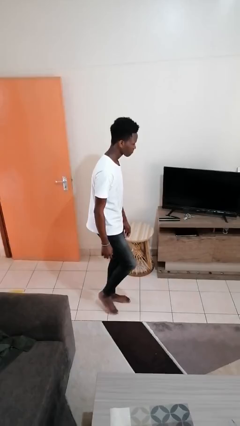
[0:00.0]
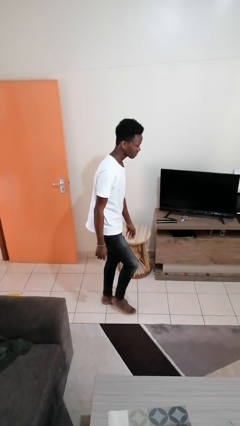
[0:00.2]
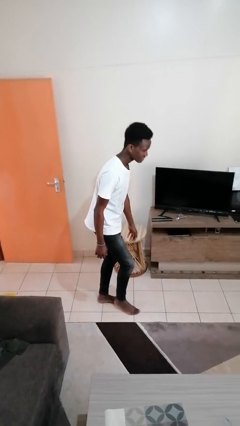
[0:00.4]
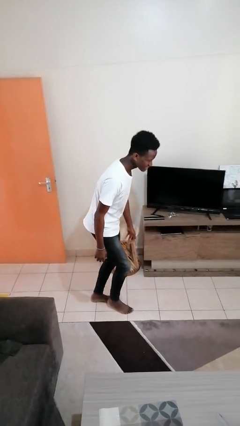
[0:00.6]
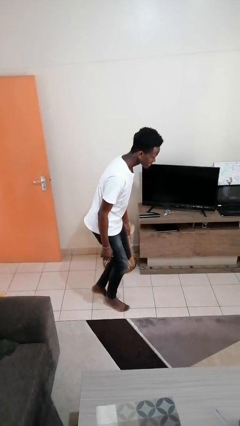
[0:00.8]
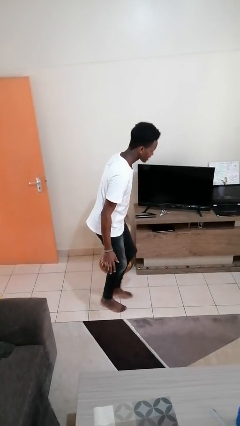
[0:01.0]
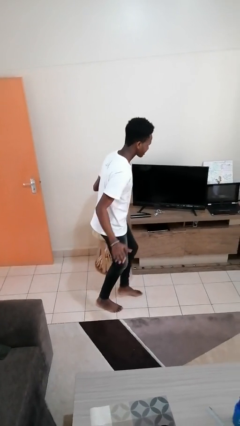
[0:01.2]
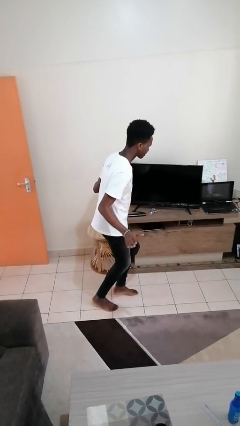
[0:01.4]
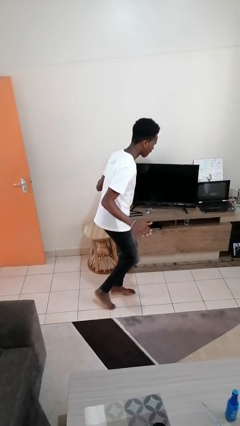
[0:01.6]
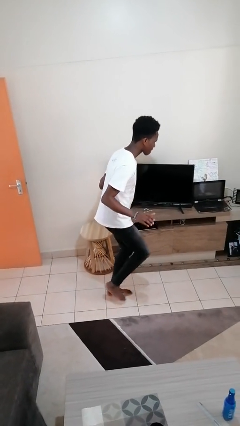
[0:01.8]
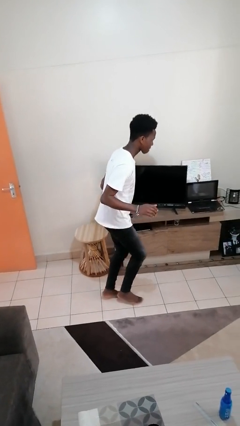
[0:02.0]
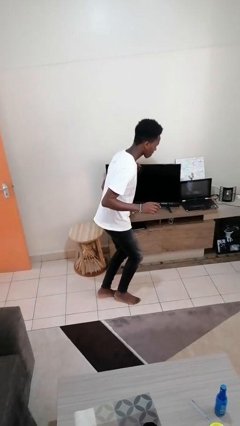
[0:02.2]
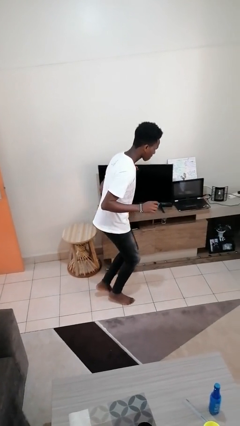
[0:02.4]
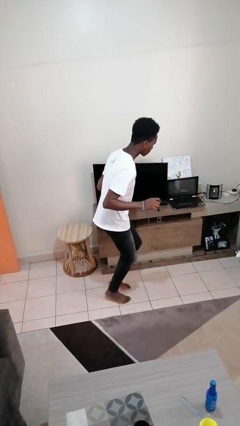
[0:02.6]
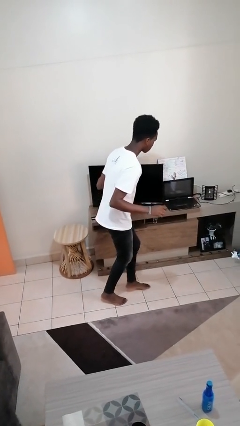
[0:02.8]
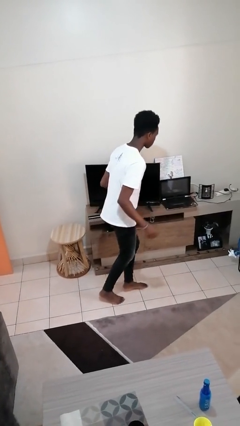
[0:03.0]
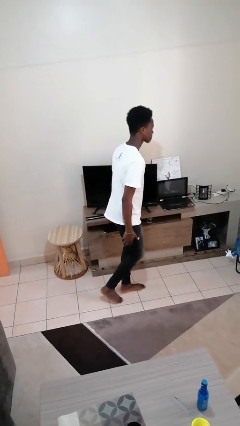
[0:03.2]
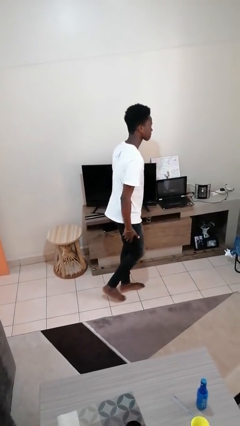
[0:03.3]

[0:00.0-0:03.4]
person walks tiptoe

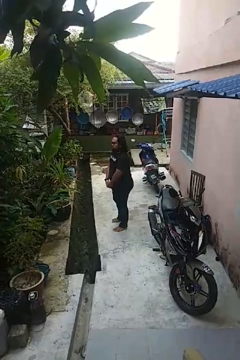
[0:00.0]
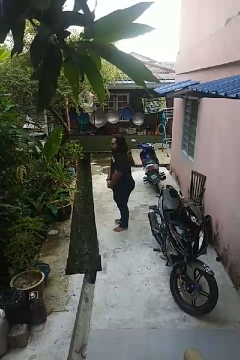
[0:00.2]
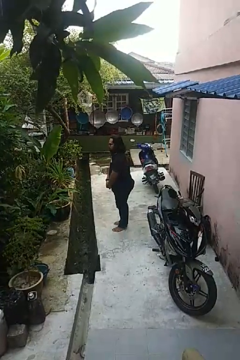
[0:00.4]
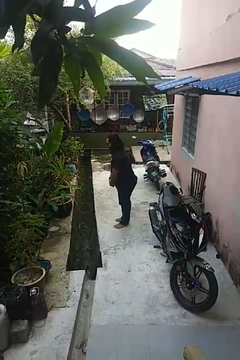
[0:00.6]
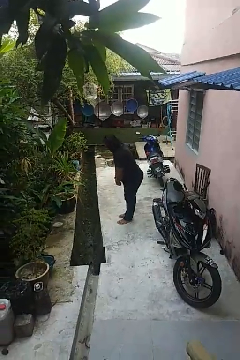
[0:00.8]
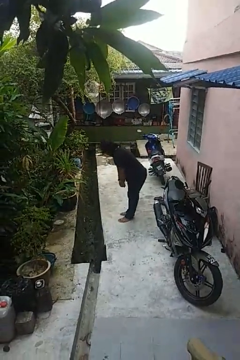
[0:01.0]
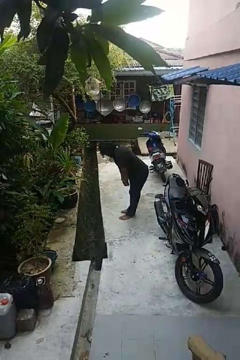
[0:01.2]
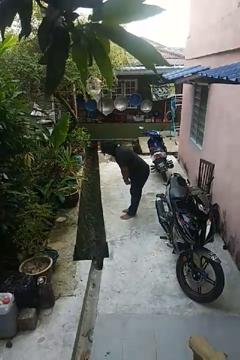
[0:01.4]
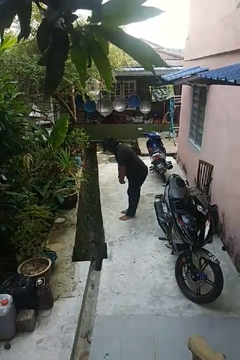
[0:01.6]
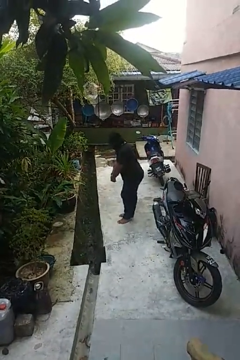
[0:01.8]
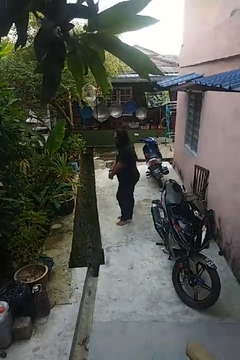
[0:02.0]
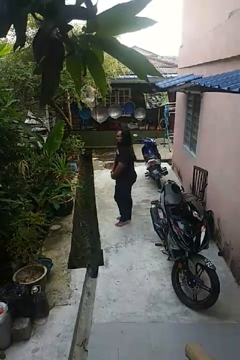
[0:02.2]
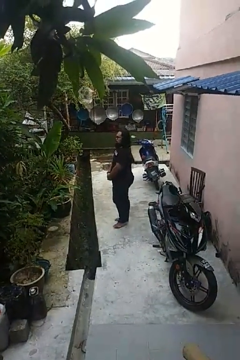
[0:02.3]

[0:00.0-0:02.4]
person bows

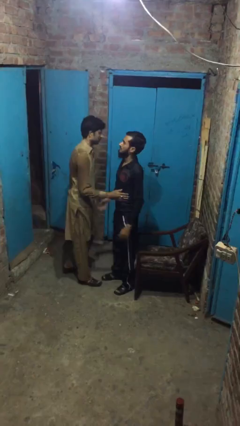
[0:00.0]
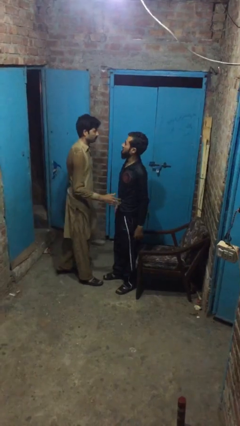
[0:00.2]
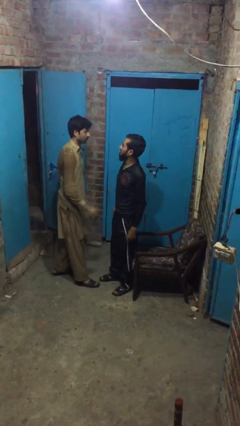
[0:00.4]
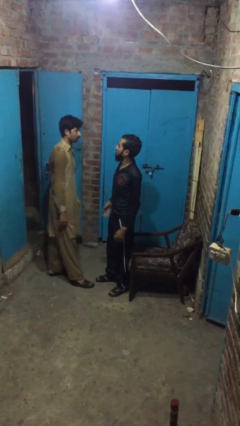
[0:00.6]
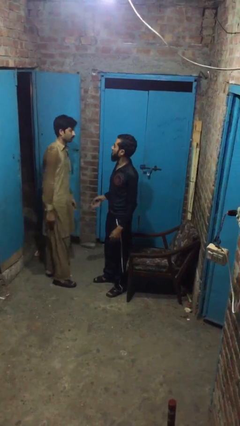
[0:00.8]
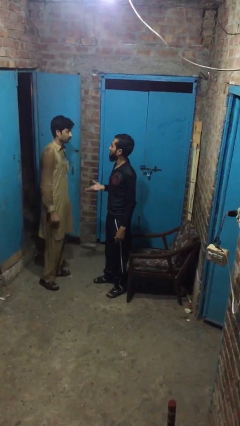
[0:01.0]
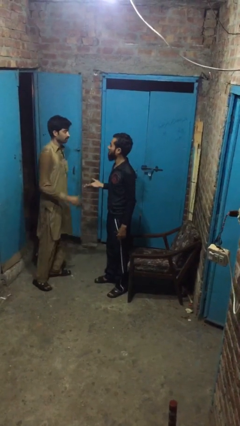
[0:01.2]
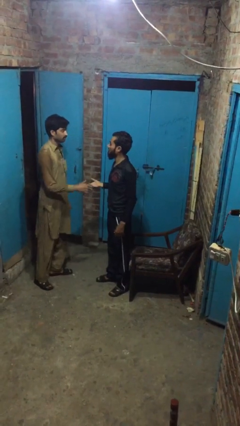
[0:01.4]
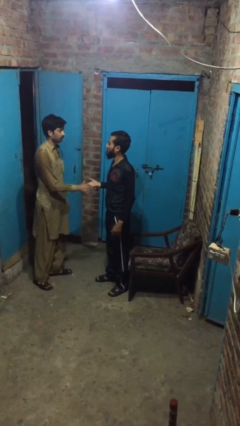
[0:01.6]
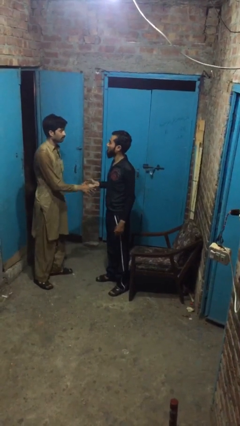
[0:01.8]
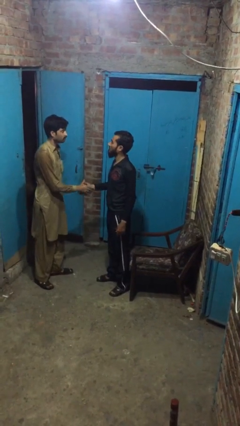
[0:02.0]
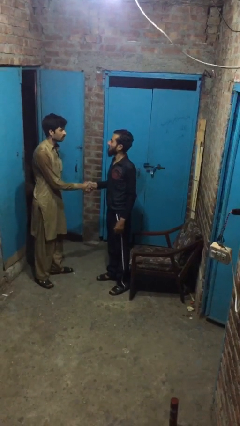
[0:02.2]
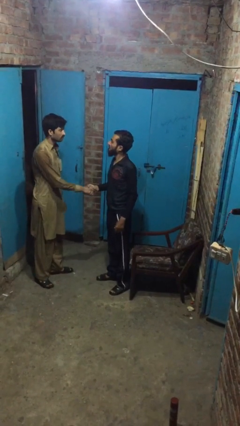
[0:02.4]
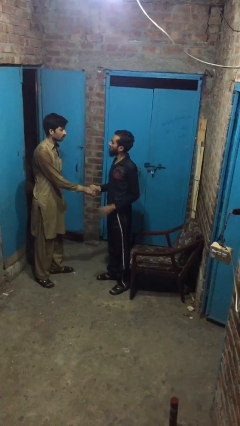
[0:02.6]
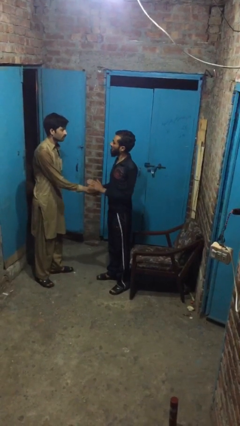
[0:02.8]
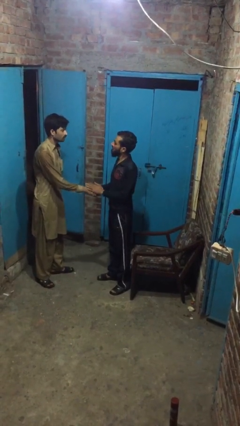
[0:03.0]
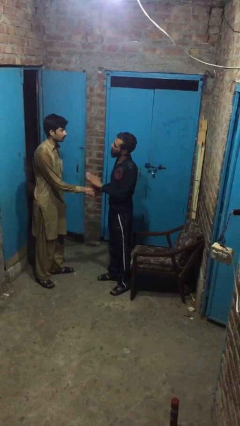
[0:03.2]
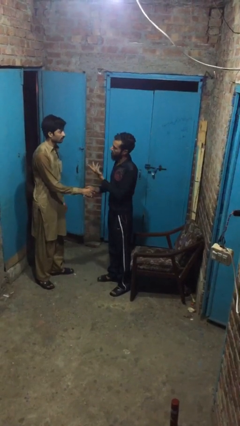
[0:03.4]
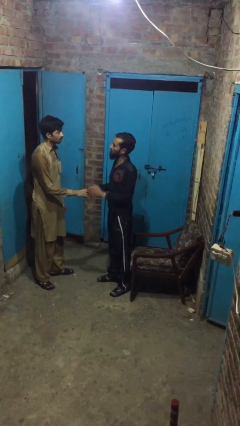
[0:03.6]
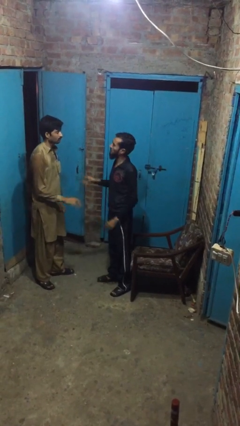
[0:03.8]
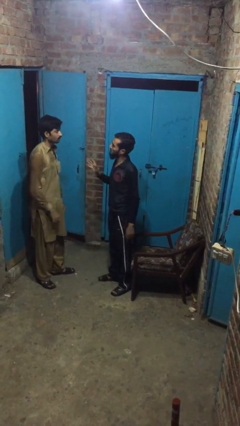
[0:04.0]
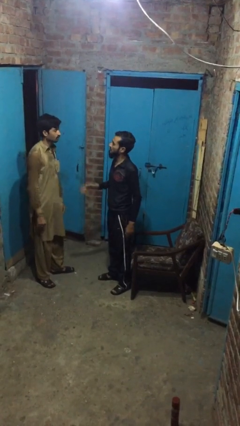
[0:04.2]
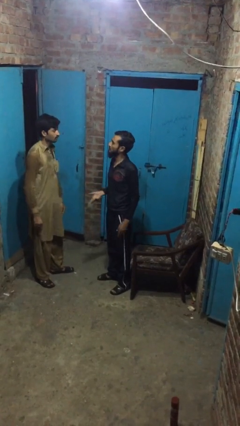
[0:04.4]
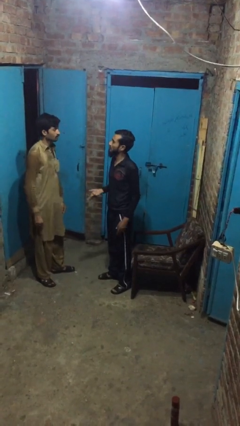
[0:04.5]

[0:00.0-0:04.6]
person talks to person

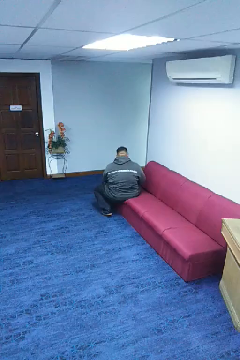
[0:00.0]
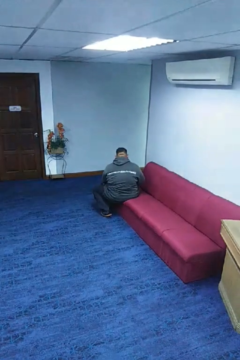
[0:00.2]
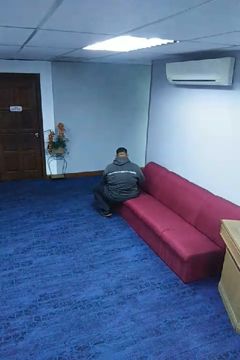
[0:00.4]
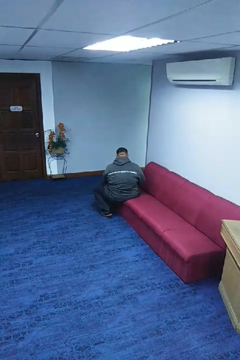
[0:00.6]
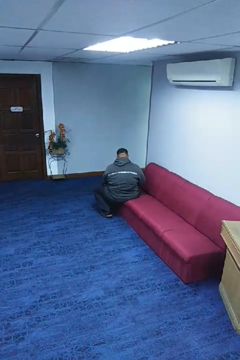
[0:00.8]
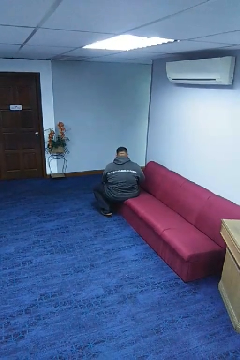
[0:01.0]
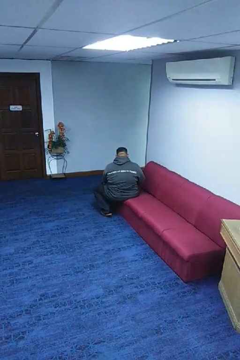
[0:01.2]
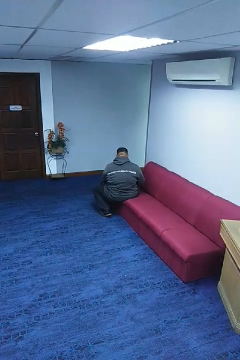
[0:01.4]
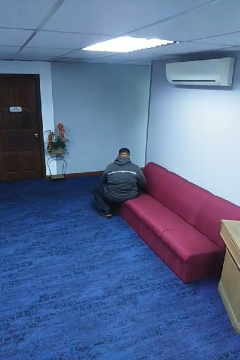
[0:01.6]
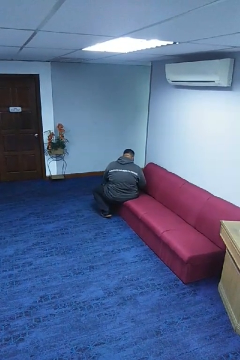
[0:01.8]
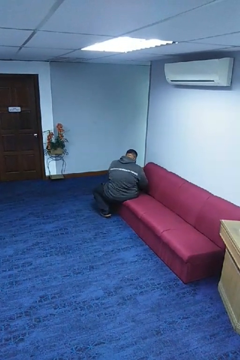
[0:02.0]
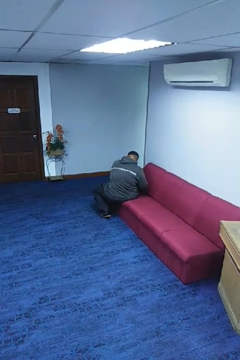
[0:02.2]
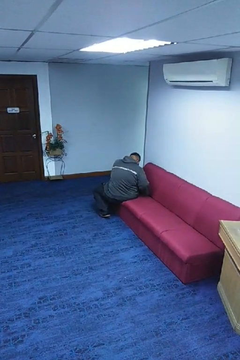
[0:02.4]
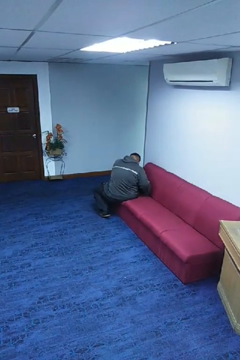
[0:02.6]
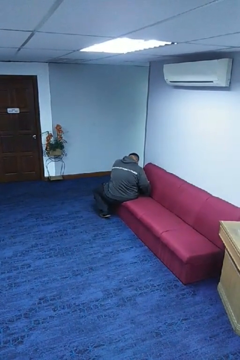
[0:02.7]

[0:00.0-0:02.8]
person searches in couch

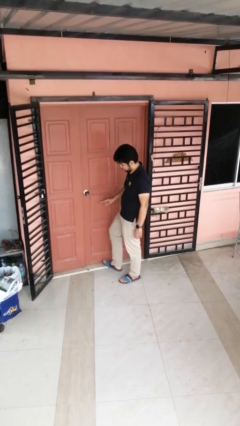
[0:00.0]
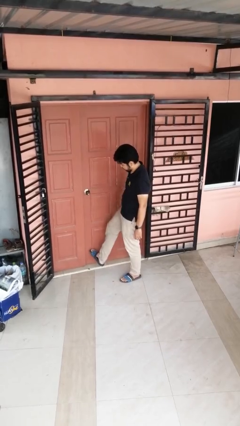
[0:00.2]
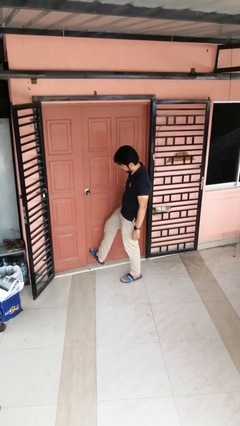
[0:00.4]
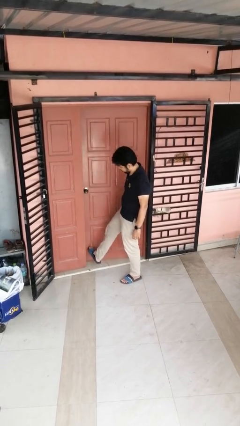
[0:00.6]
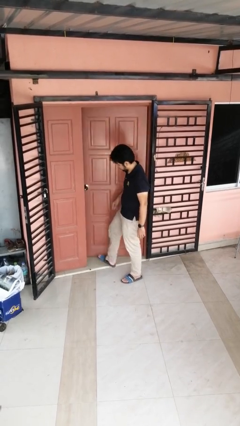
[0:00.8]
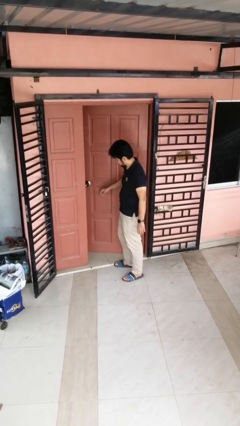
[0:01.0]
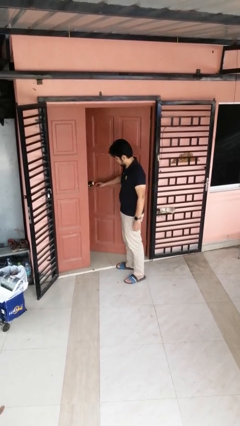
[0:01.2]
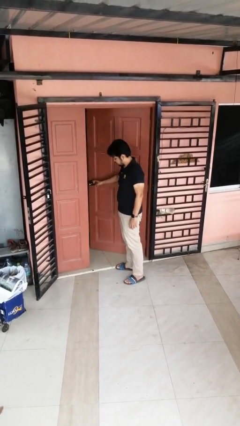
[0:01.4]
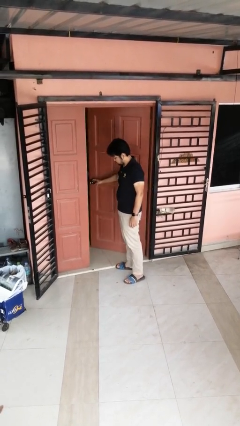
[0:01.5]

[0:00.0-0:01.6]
person opens facility door

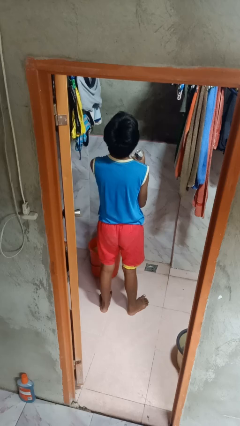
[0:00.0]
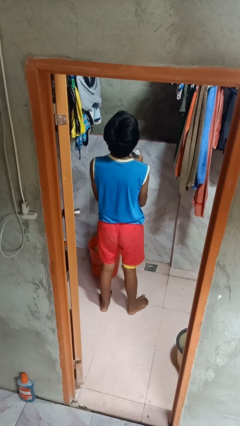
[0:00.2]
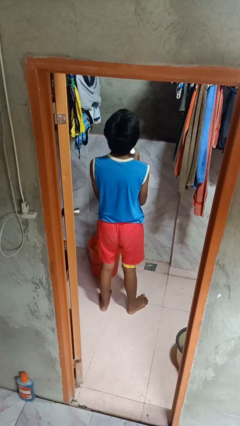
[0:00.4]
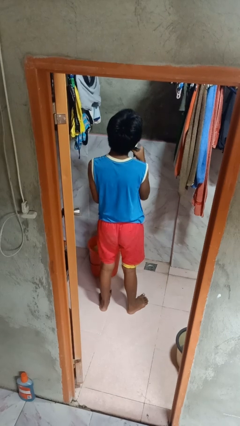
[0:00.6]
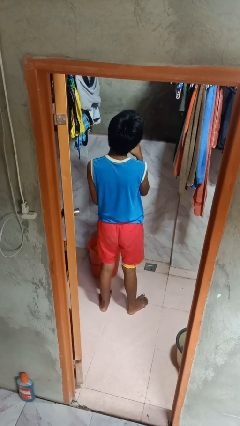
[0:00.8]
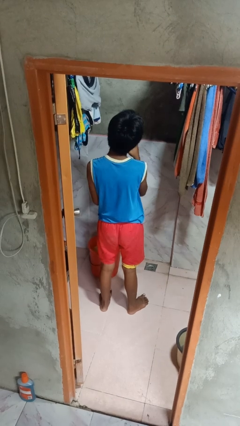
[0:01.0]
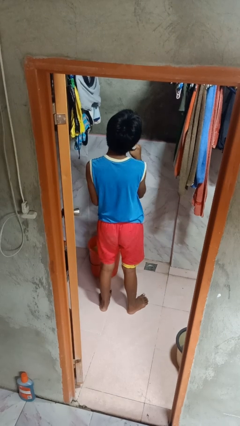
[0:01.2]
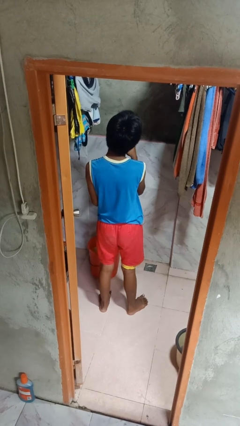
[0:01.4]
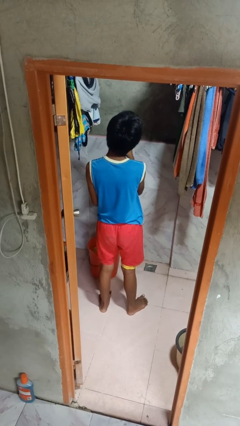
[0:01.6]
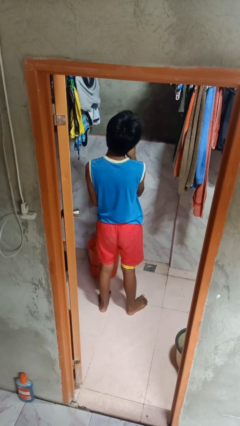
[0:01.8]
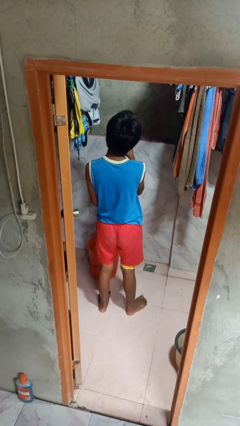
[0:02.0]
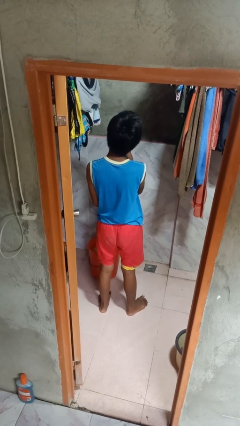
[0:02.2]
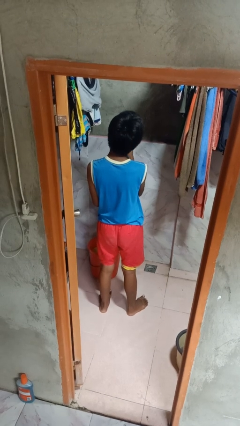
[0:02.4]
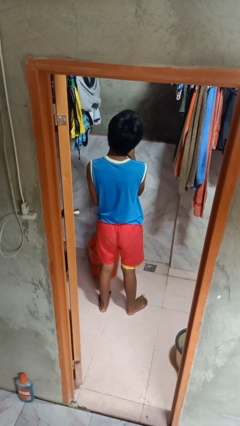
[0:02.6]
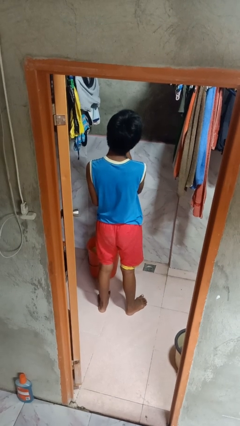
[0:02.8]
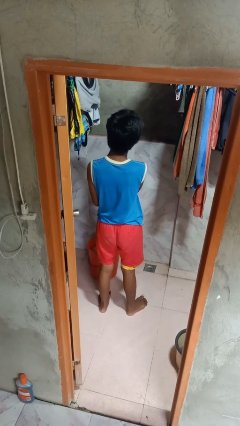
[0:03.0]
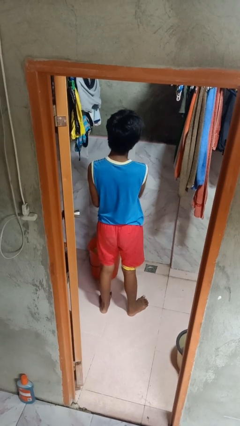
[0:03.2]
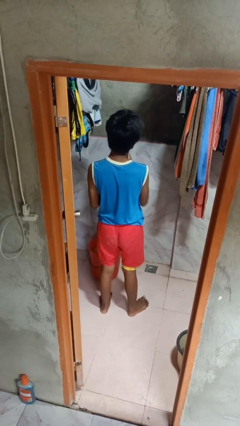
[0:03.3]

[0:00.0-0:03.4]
person shaves face

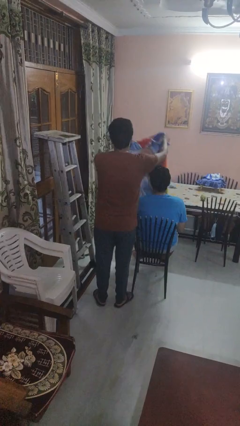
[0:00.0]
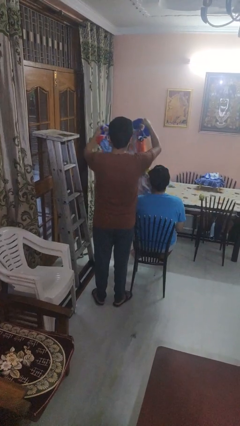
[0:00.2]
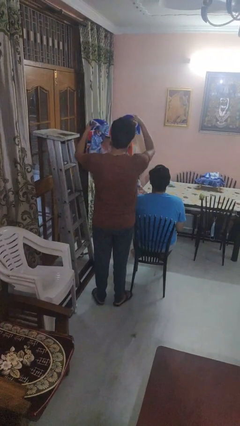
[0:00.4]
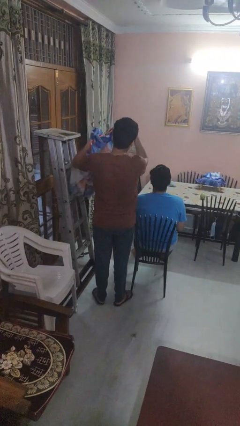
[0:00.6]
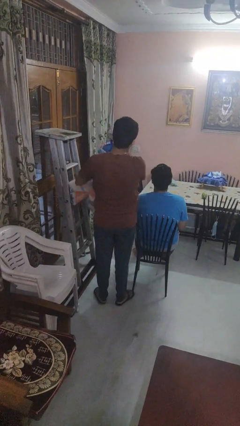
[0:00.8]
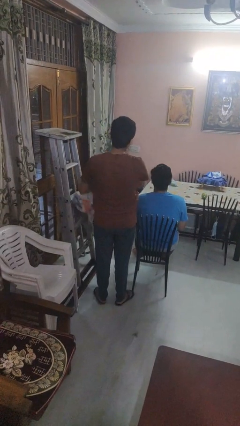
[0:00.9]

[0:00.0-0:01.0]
person uncovers friend with blanket
